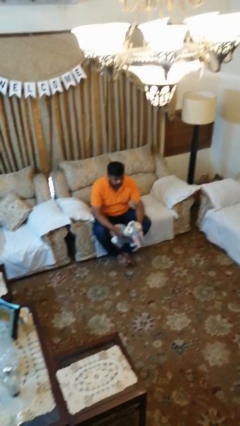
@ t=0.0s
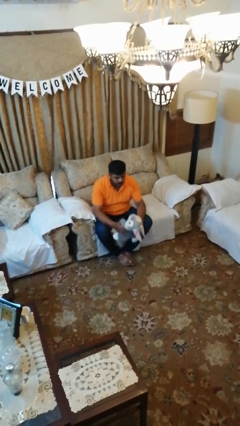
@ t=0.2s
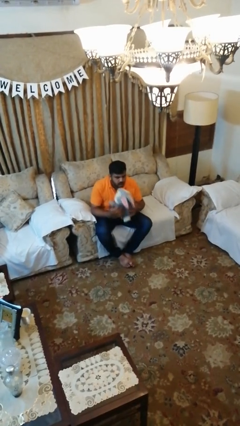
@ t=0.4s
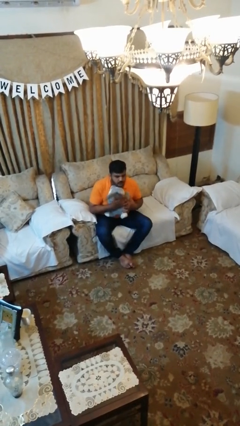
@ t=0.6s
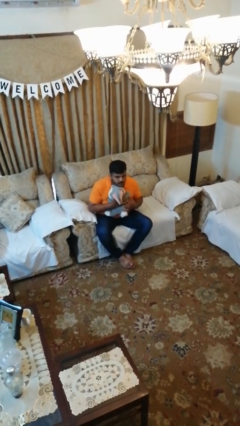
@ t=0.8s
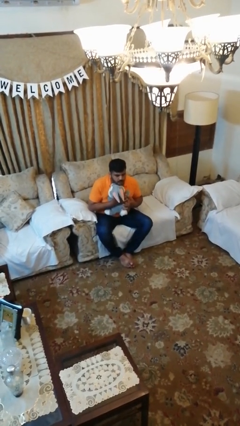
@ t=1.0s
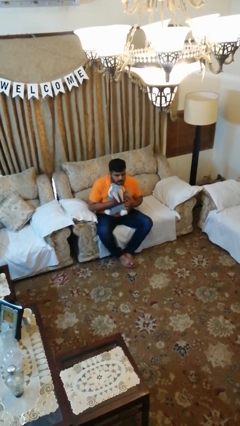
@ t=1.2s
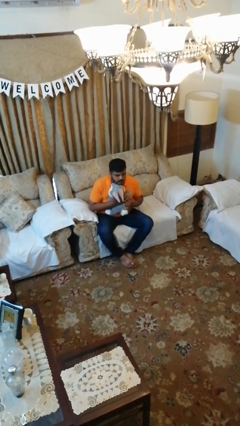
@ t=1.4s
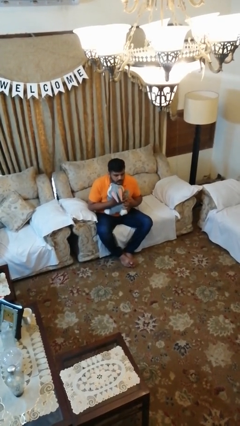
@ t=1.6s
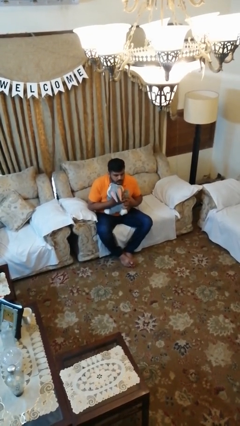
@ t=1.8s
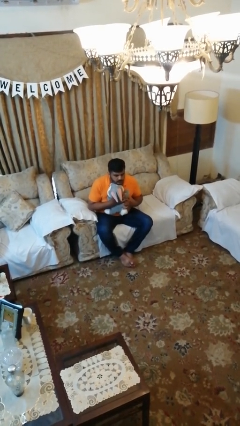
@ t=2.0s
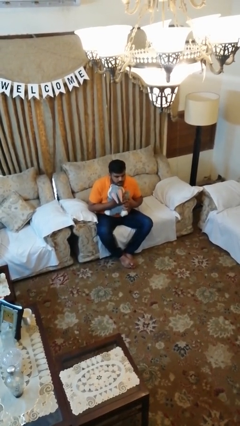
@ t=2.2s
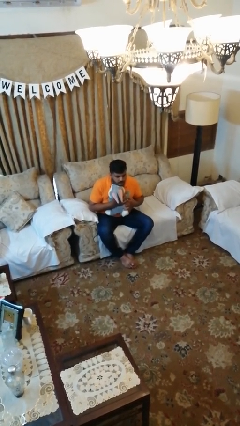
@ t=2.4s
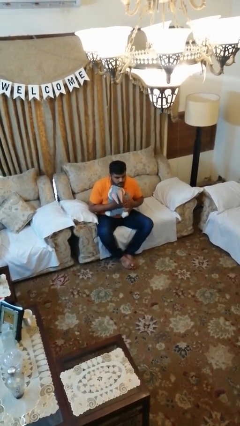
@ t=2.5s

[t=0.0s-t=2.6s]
person hugs stuffed animal

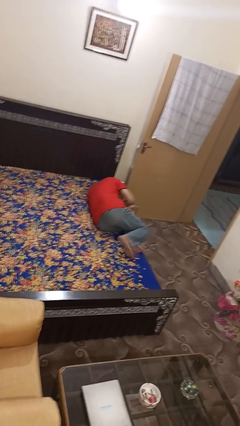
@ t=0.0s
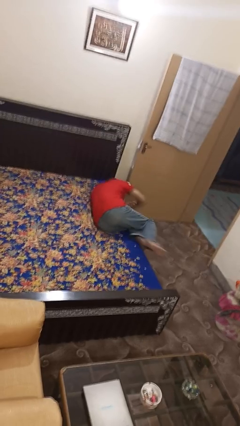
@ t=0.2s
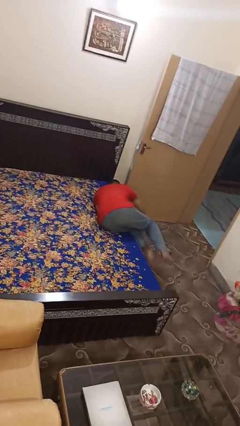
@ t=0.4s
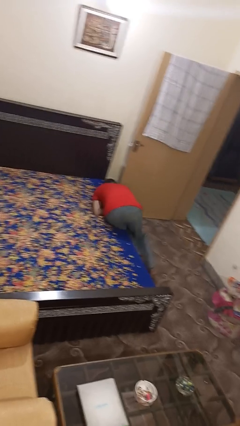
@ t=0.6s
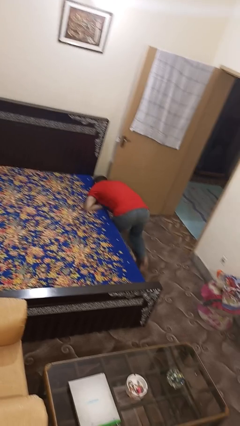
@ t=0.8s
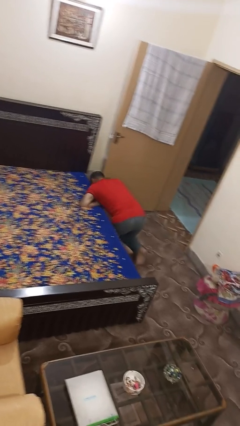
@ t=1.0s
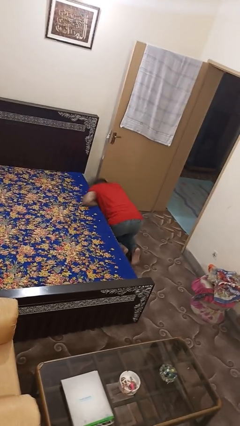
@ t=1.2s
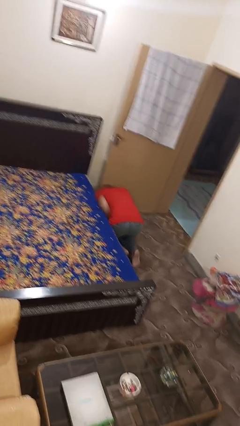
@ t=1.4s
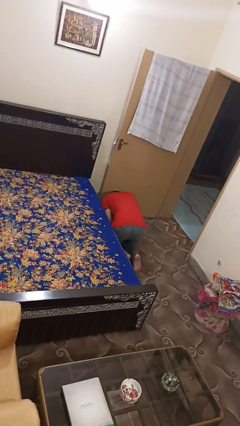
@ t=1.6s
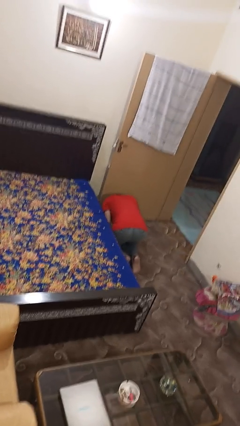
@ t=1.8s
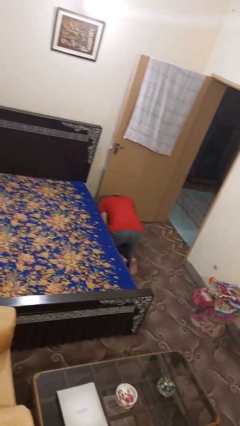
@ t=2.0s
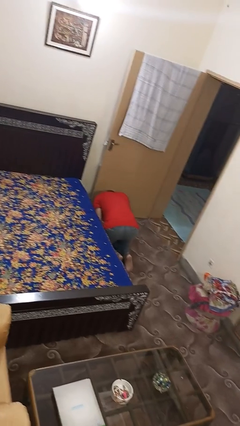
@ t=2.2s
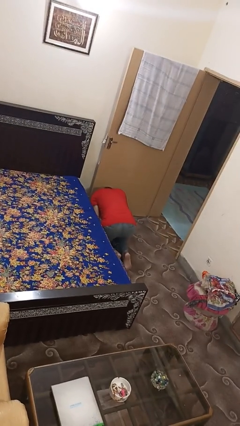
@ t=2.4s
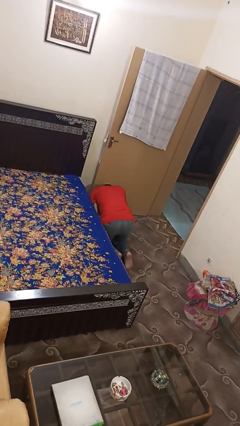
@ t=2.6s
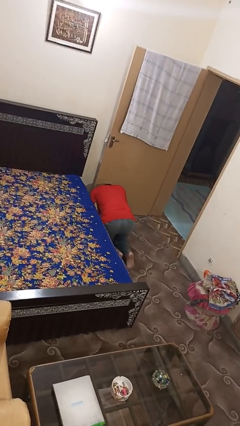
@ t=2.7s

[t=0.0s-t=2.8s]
person falls from bed

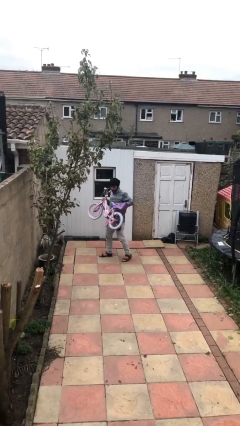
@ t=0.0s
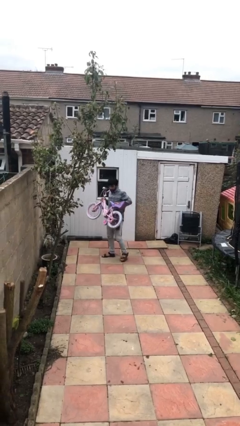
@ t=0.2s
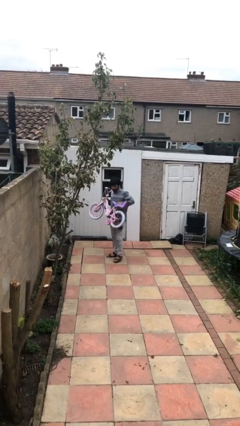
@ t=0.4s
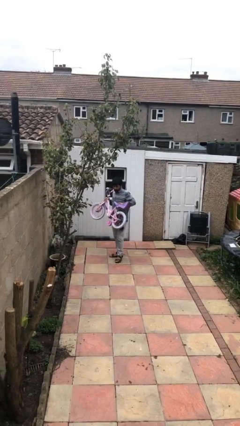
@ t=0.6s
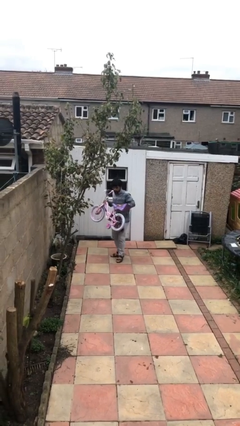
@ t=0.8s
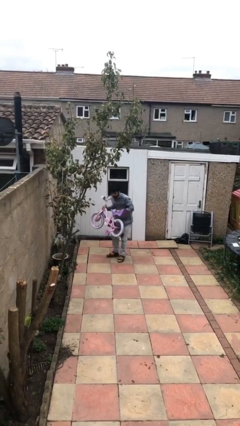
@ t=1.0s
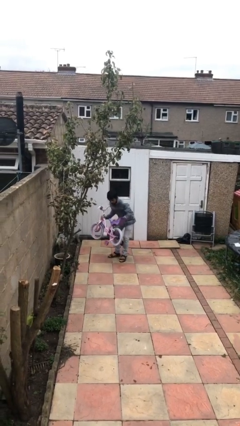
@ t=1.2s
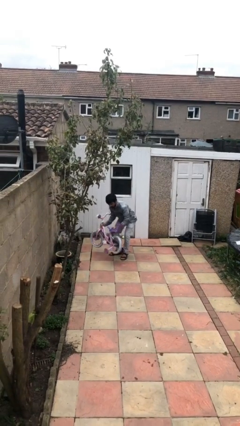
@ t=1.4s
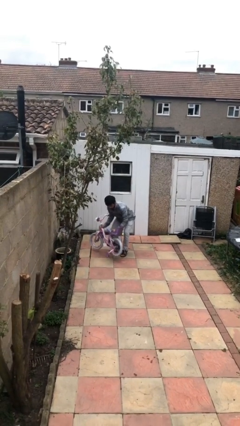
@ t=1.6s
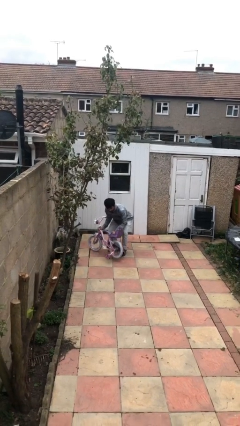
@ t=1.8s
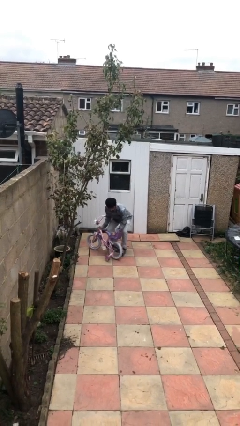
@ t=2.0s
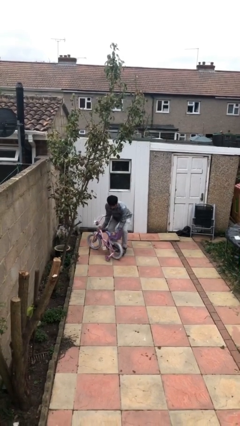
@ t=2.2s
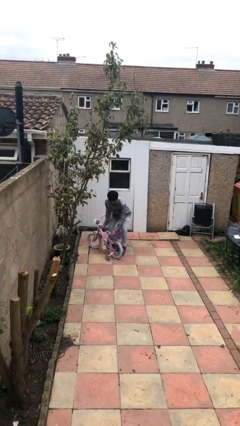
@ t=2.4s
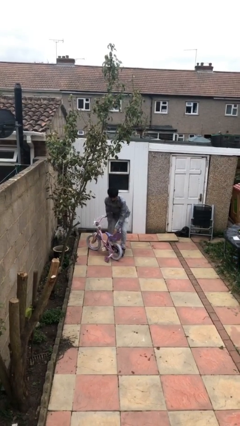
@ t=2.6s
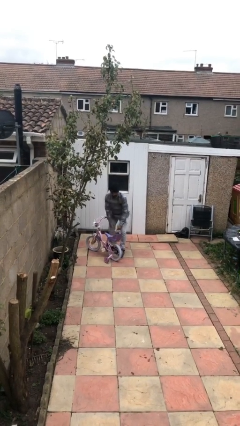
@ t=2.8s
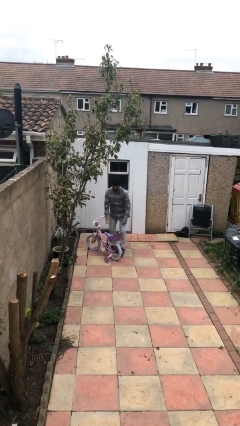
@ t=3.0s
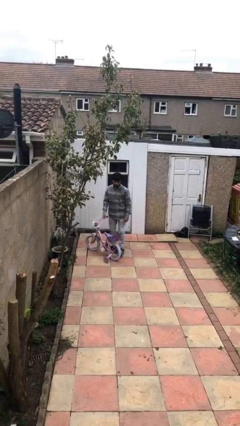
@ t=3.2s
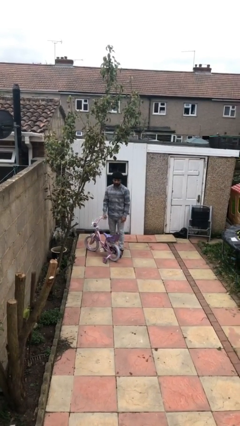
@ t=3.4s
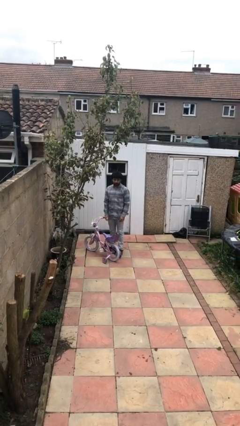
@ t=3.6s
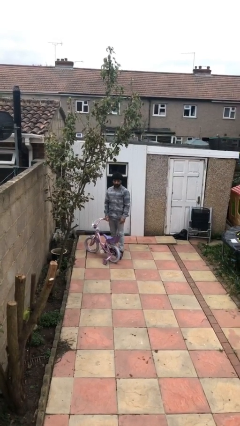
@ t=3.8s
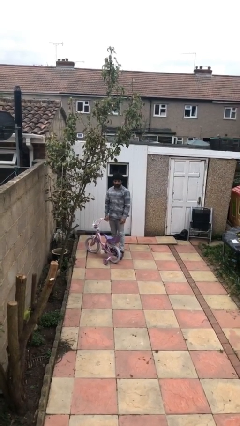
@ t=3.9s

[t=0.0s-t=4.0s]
person puts down object on floor

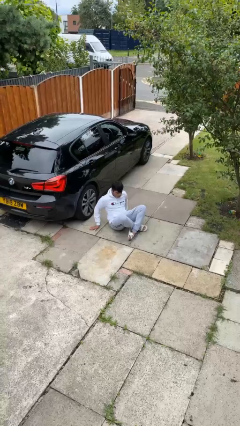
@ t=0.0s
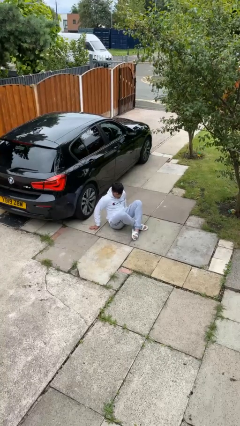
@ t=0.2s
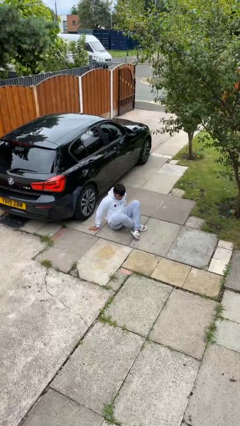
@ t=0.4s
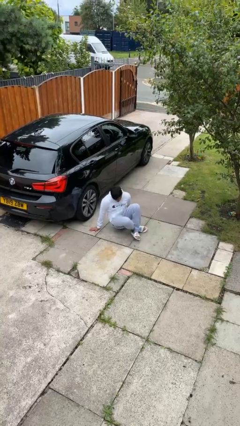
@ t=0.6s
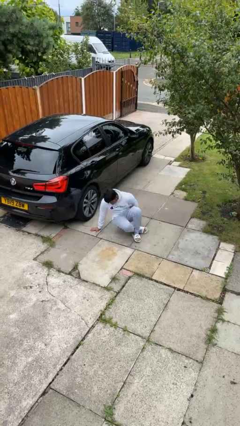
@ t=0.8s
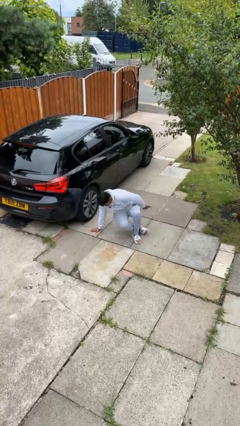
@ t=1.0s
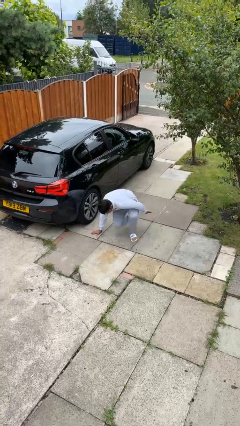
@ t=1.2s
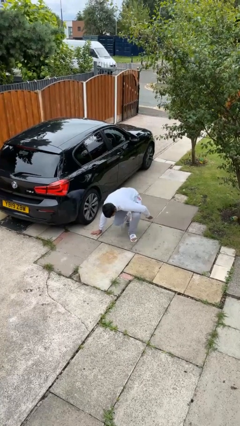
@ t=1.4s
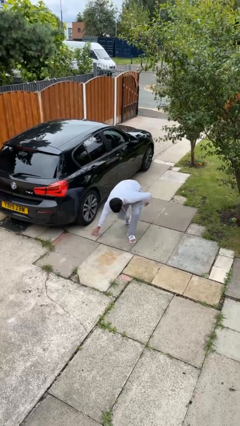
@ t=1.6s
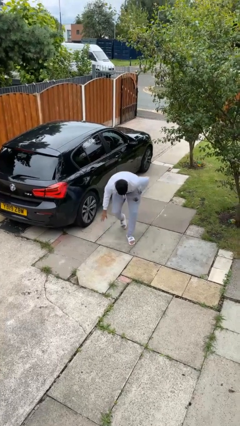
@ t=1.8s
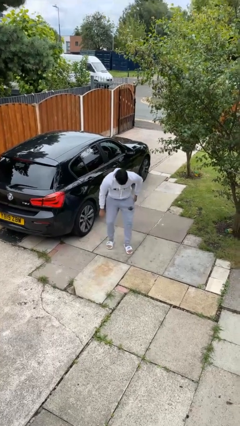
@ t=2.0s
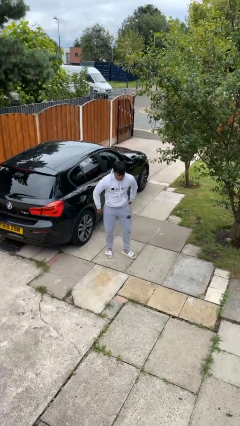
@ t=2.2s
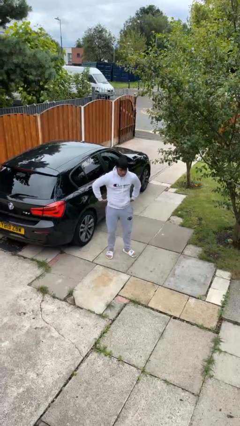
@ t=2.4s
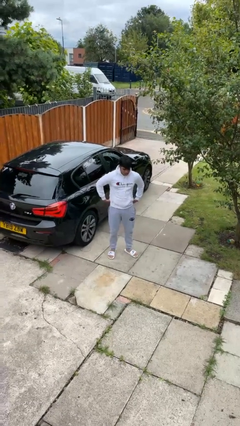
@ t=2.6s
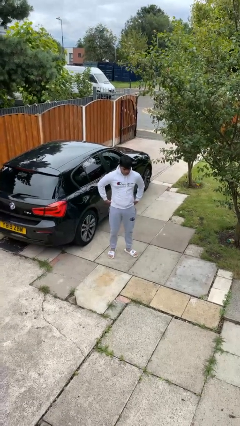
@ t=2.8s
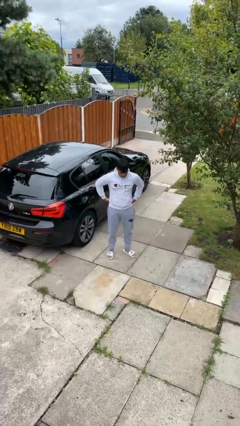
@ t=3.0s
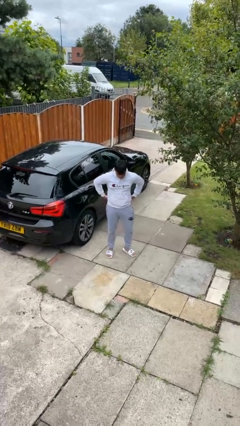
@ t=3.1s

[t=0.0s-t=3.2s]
person stands up from floor

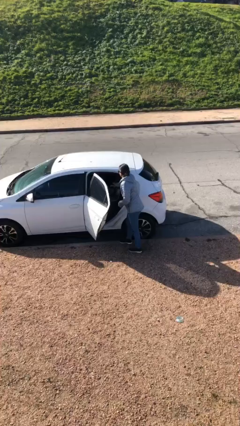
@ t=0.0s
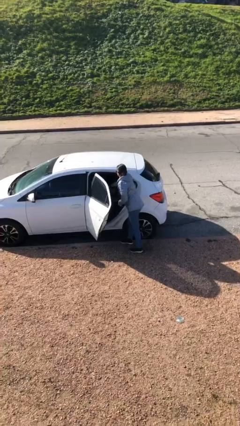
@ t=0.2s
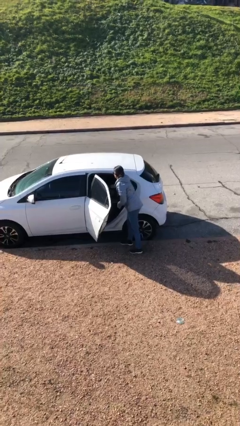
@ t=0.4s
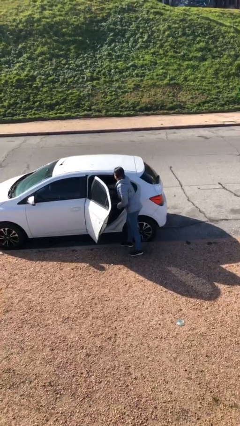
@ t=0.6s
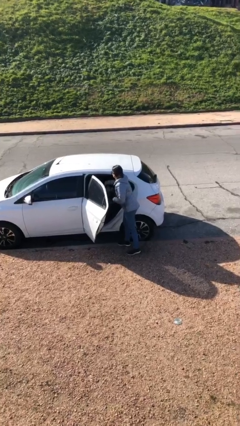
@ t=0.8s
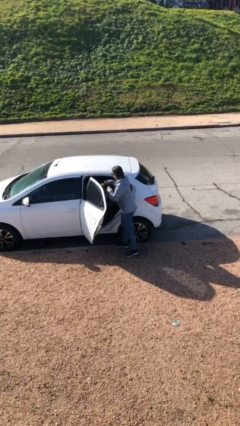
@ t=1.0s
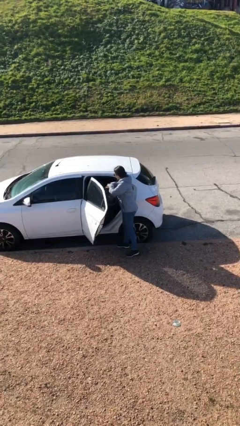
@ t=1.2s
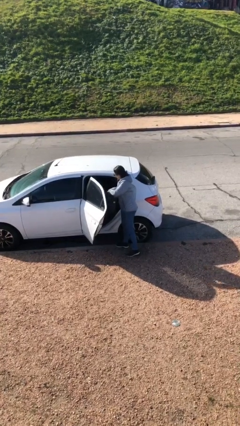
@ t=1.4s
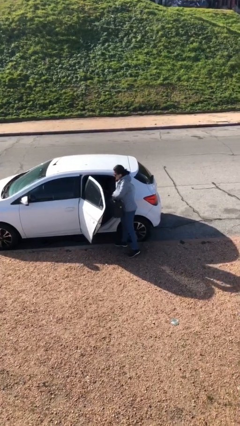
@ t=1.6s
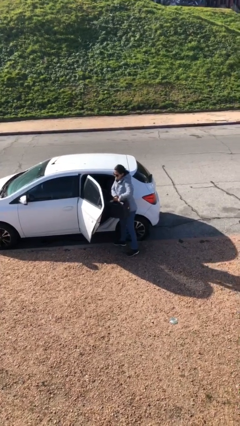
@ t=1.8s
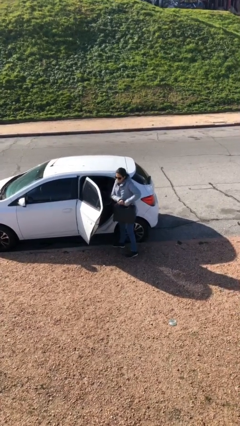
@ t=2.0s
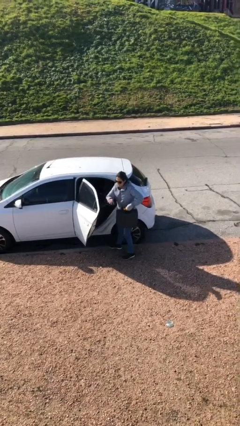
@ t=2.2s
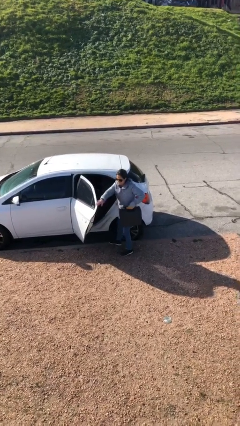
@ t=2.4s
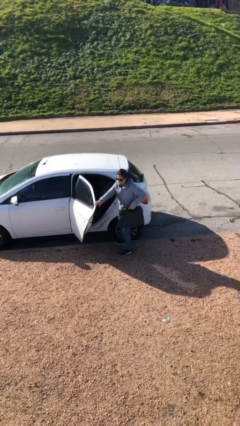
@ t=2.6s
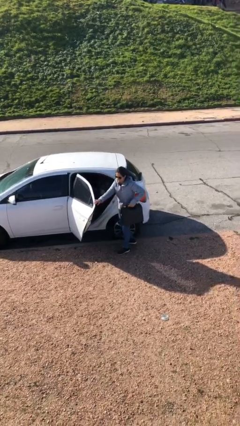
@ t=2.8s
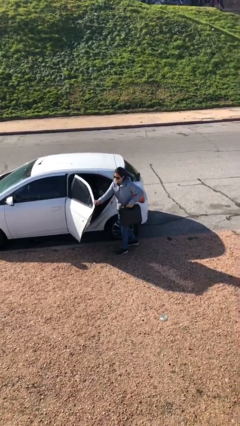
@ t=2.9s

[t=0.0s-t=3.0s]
person unloads car

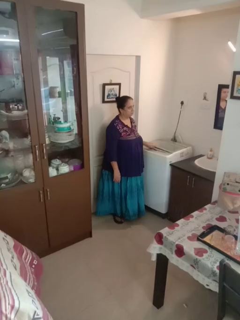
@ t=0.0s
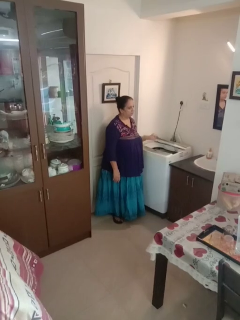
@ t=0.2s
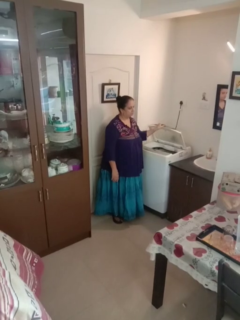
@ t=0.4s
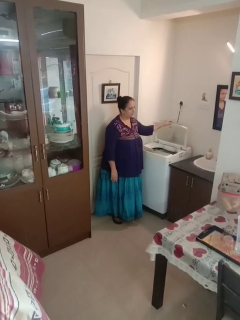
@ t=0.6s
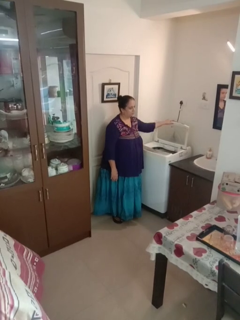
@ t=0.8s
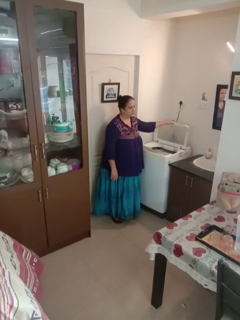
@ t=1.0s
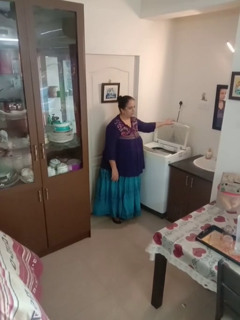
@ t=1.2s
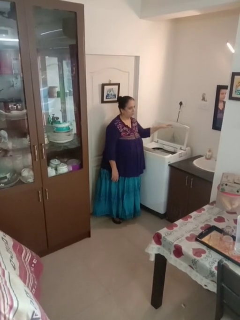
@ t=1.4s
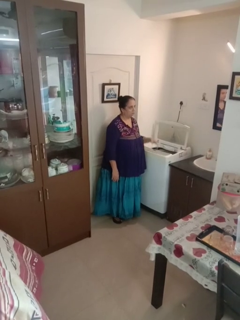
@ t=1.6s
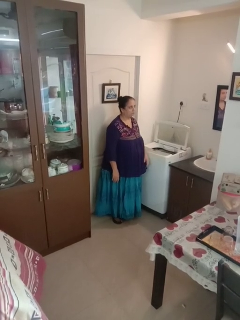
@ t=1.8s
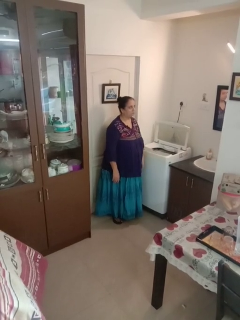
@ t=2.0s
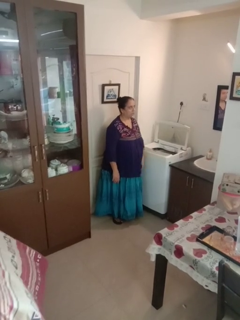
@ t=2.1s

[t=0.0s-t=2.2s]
person opens clothes washer
